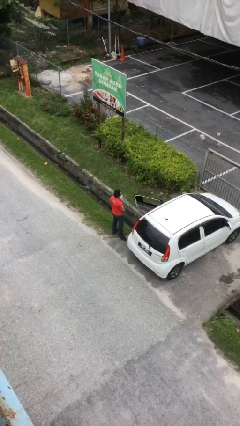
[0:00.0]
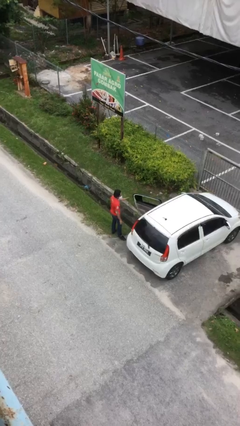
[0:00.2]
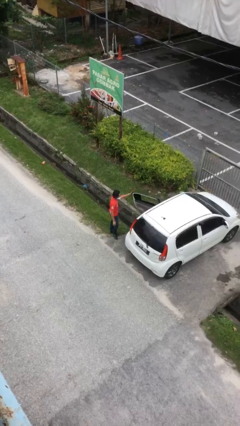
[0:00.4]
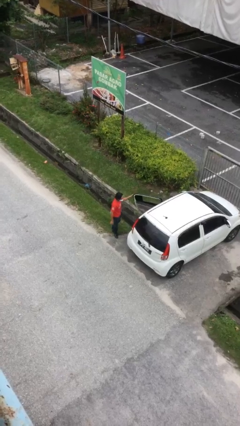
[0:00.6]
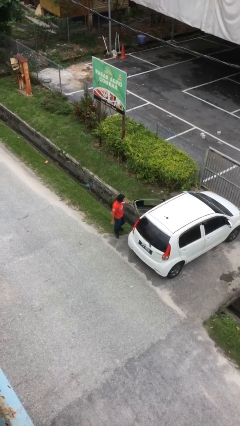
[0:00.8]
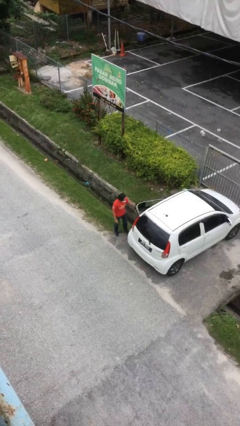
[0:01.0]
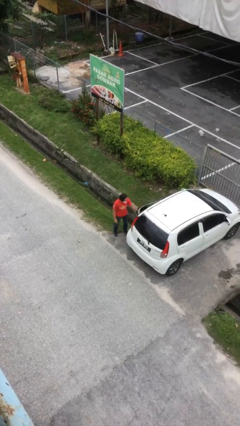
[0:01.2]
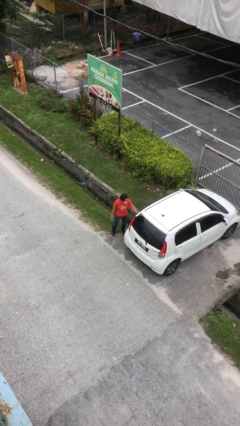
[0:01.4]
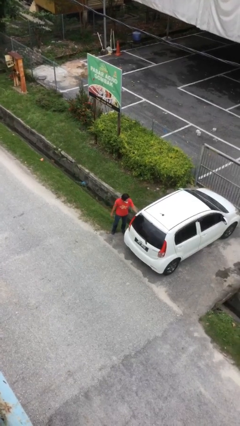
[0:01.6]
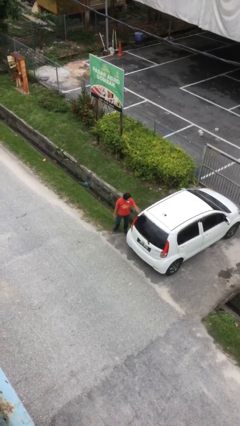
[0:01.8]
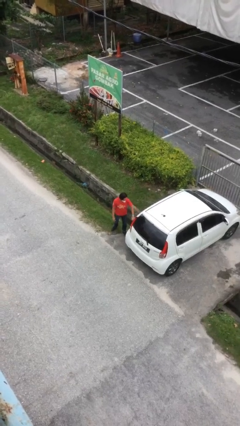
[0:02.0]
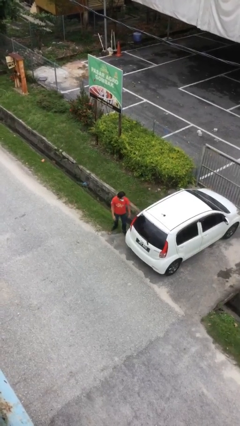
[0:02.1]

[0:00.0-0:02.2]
person closes car door

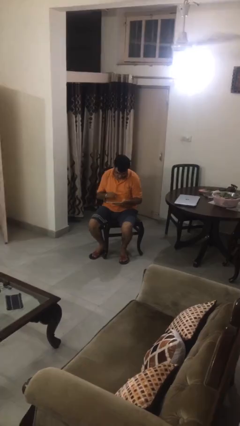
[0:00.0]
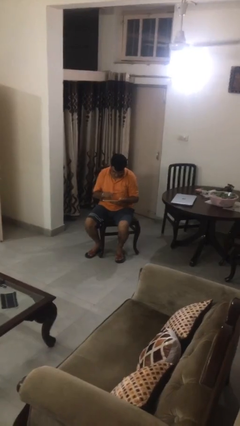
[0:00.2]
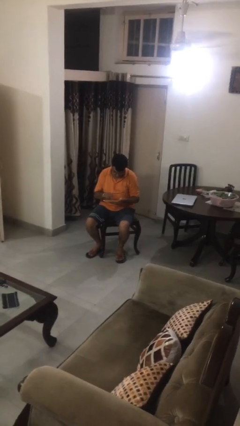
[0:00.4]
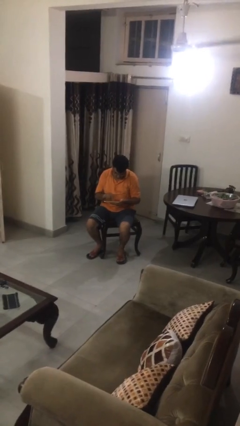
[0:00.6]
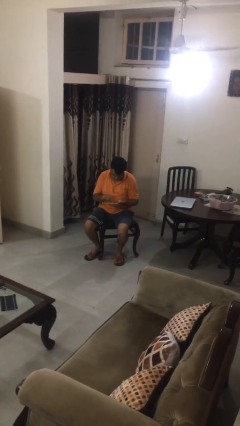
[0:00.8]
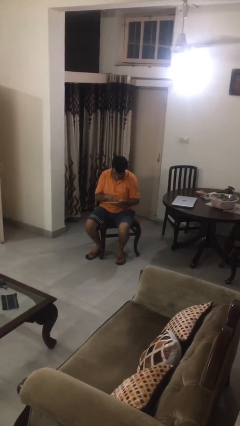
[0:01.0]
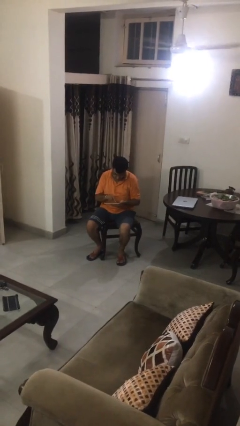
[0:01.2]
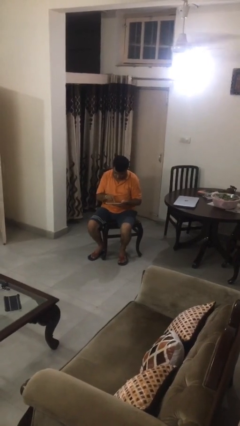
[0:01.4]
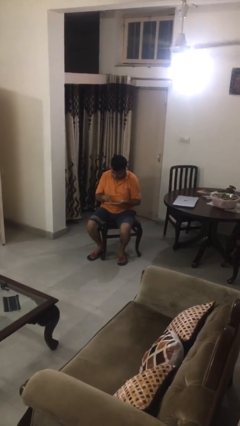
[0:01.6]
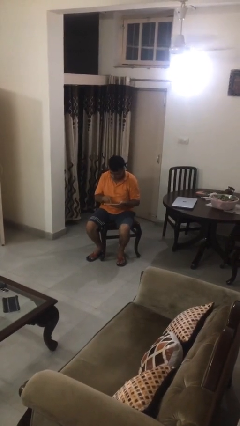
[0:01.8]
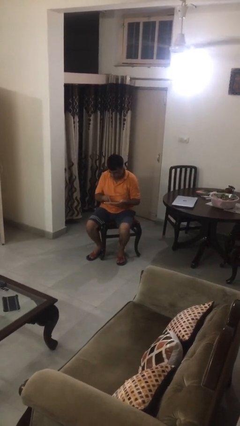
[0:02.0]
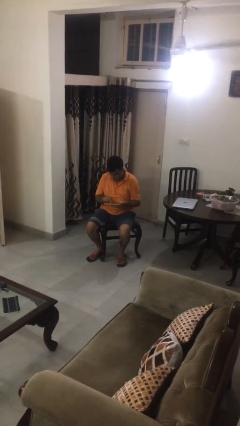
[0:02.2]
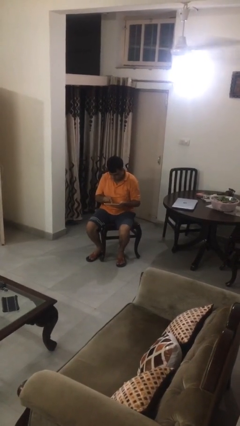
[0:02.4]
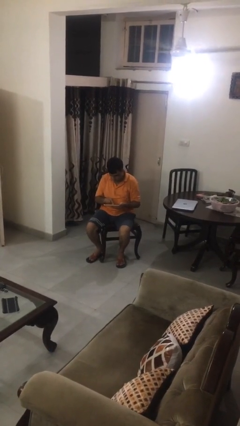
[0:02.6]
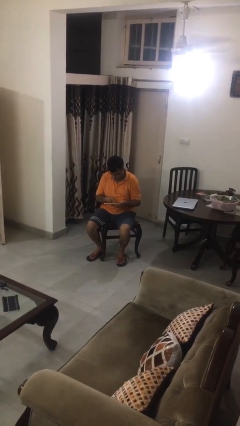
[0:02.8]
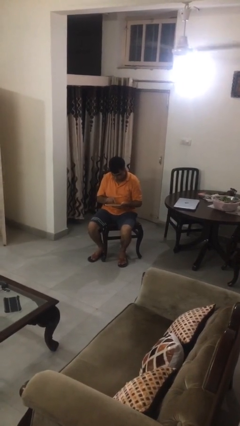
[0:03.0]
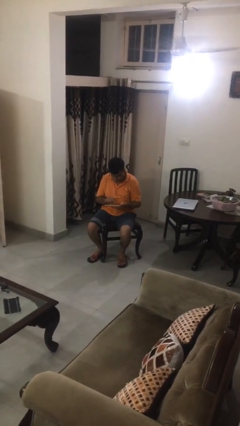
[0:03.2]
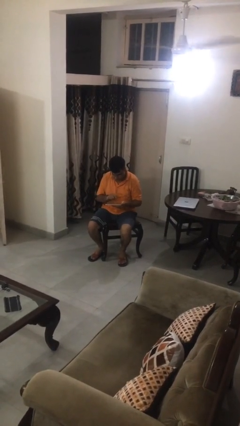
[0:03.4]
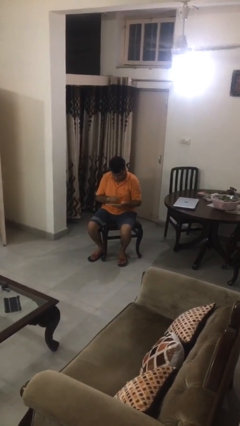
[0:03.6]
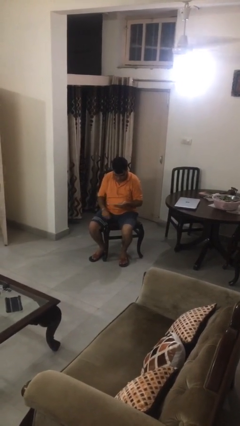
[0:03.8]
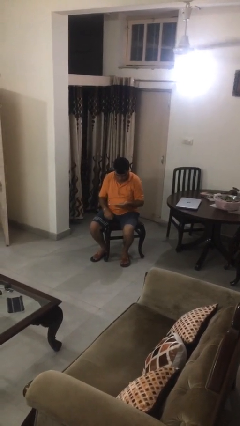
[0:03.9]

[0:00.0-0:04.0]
person interacts with tablet

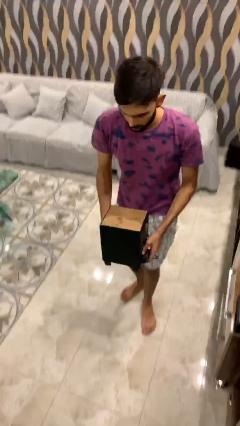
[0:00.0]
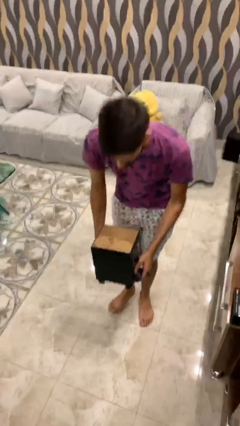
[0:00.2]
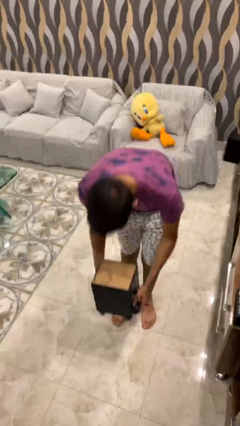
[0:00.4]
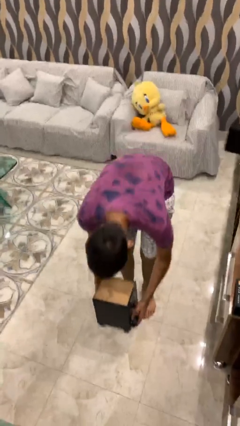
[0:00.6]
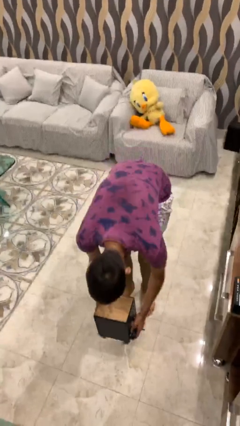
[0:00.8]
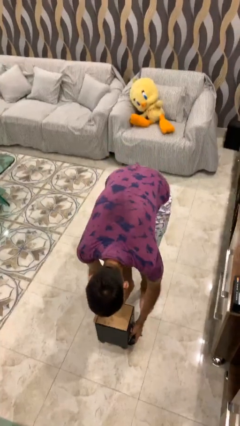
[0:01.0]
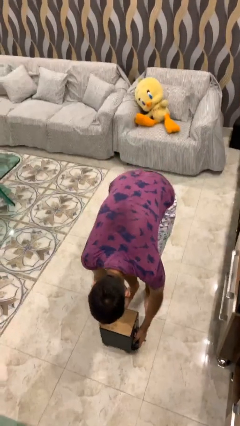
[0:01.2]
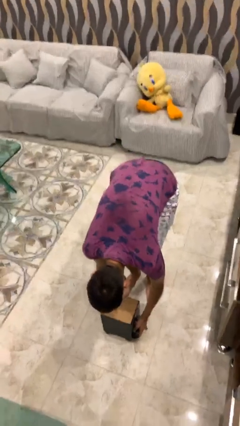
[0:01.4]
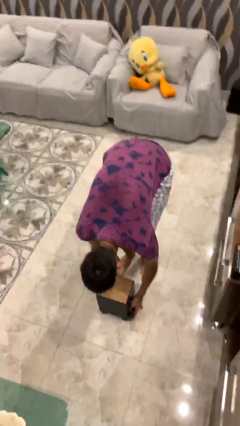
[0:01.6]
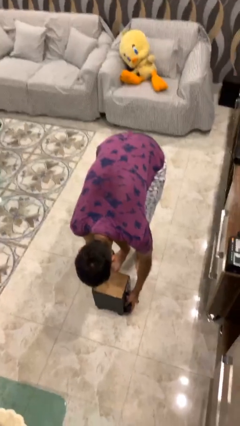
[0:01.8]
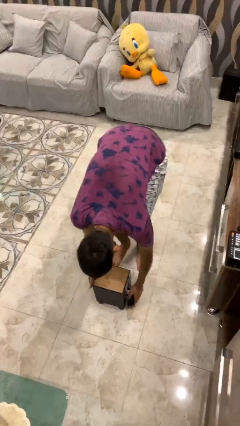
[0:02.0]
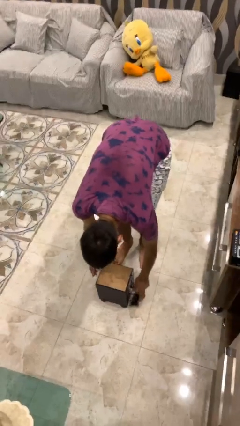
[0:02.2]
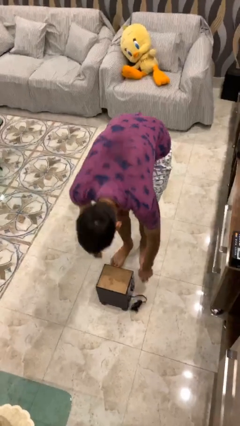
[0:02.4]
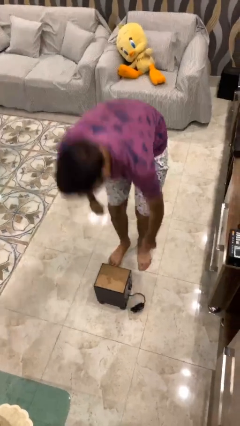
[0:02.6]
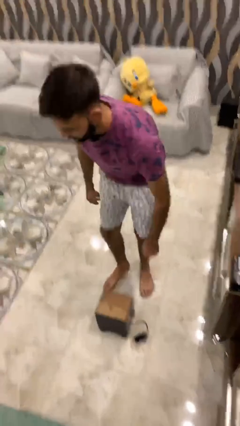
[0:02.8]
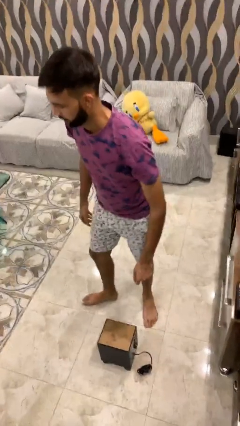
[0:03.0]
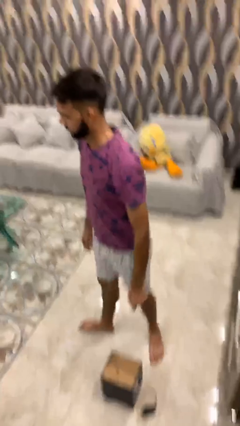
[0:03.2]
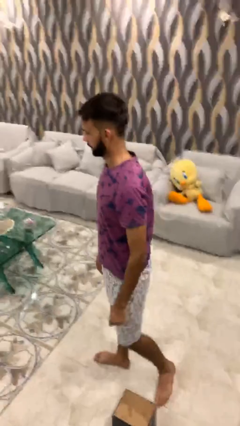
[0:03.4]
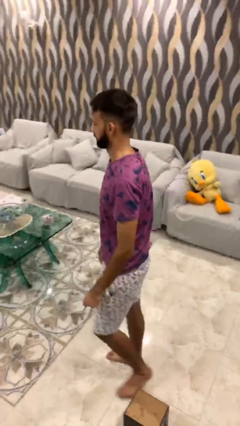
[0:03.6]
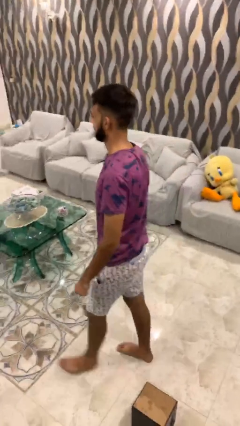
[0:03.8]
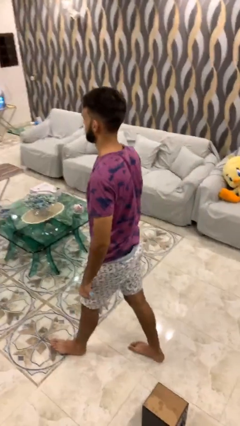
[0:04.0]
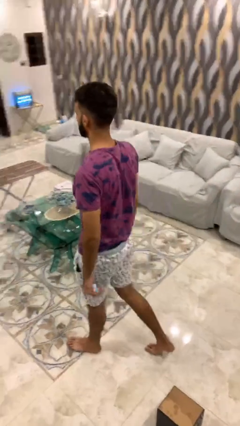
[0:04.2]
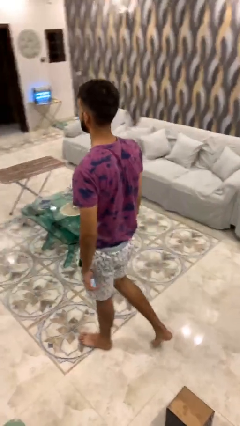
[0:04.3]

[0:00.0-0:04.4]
person puts down object on floor

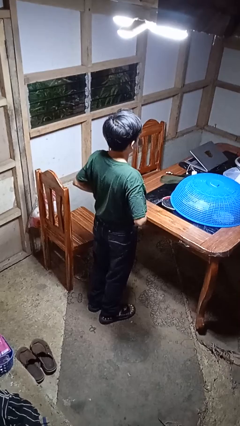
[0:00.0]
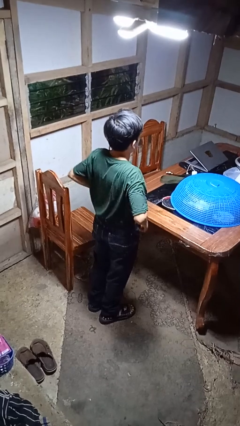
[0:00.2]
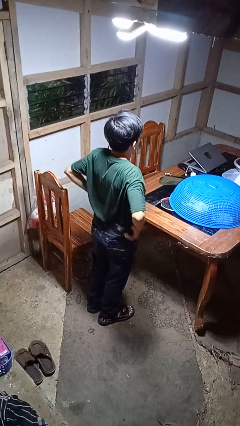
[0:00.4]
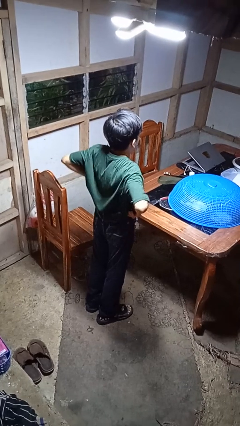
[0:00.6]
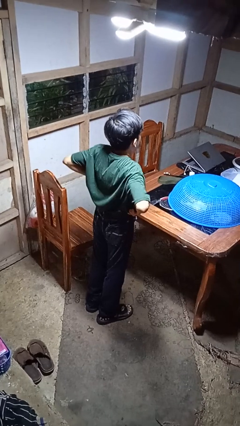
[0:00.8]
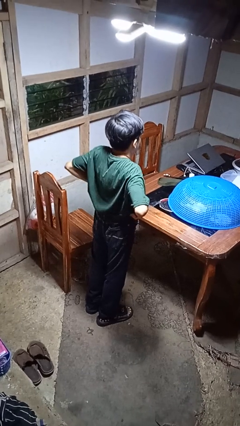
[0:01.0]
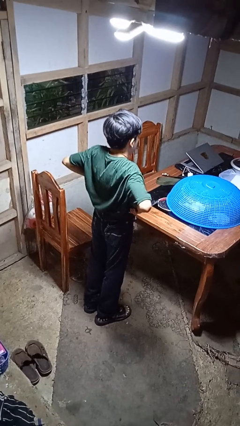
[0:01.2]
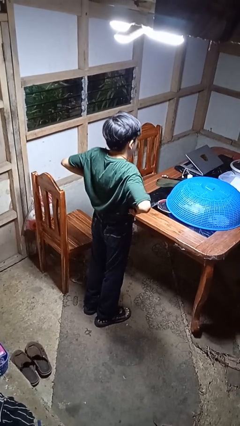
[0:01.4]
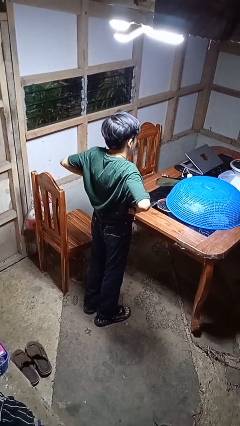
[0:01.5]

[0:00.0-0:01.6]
person hikes up pants

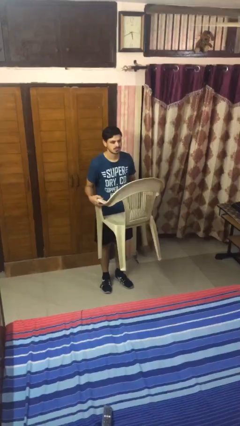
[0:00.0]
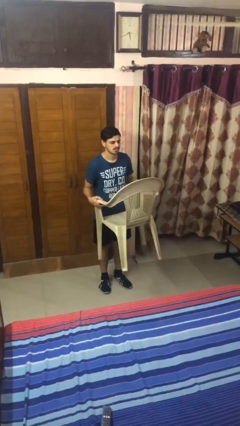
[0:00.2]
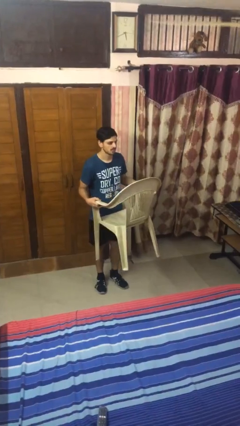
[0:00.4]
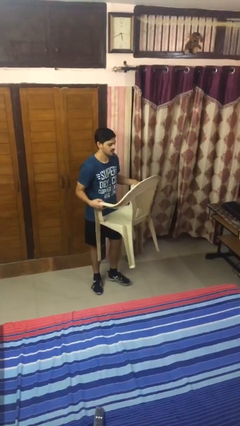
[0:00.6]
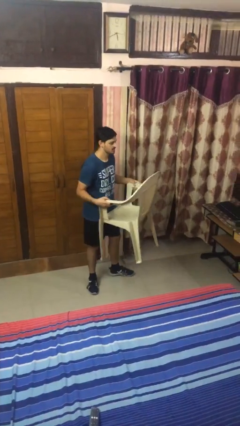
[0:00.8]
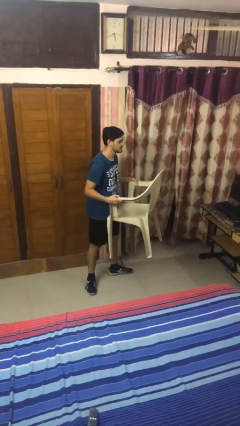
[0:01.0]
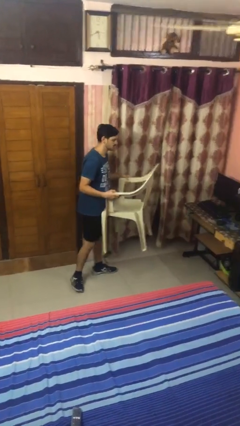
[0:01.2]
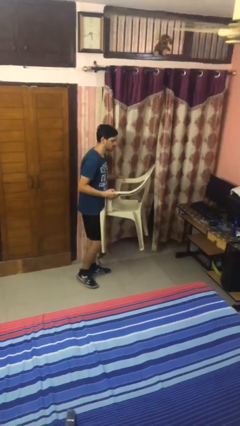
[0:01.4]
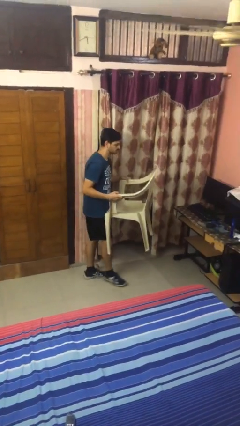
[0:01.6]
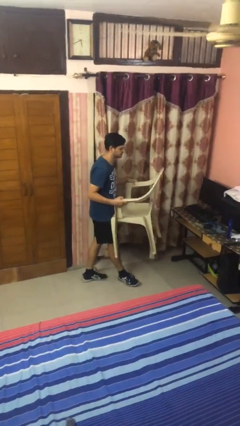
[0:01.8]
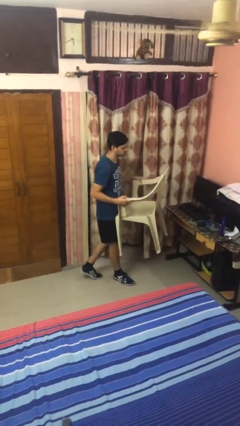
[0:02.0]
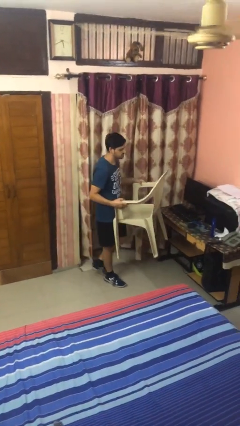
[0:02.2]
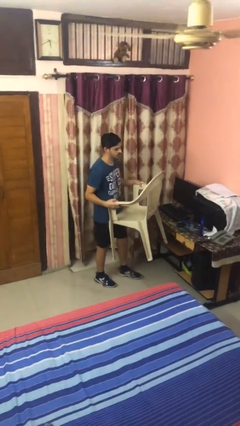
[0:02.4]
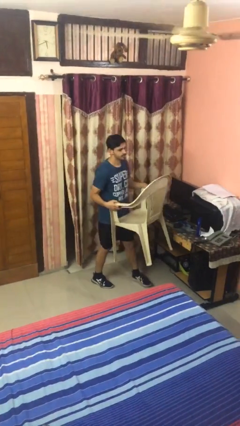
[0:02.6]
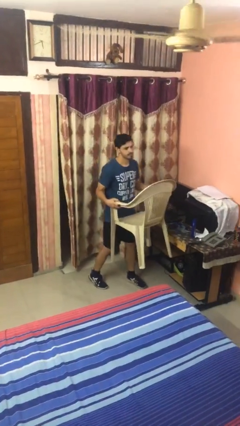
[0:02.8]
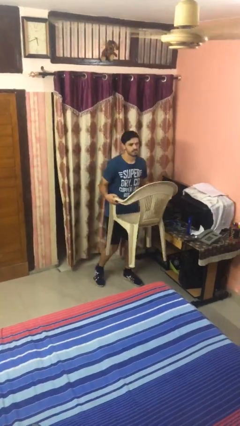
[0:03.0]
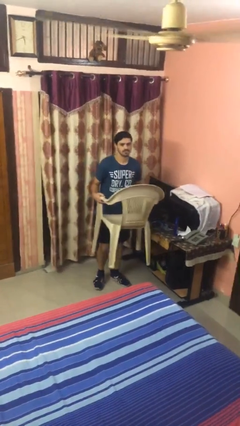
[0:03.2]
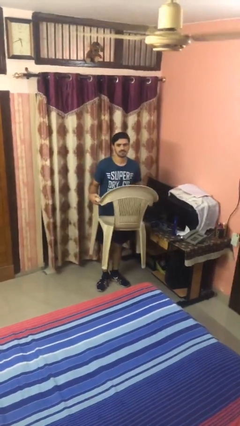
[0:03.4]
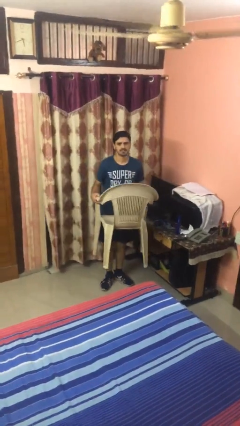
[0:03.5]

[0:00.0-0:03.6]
person carries furniture

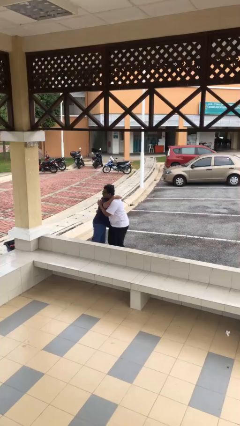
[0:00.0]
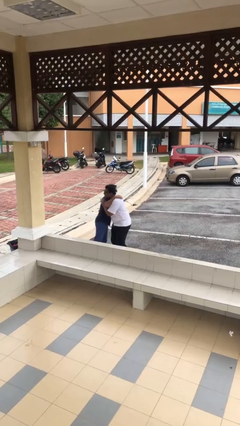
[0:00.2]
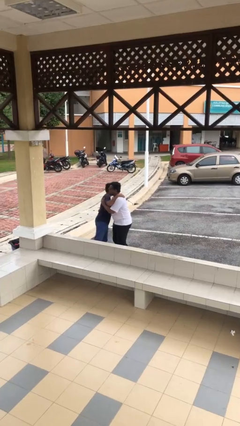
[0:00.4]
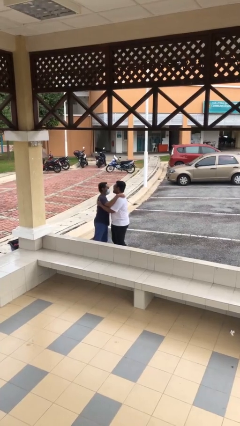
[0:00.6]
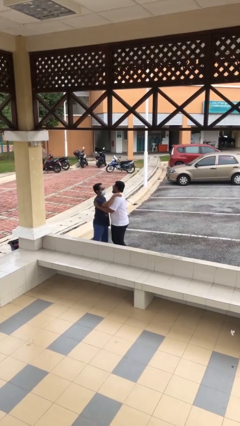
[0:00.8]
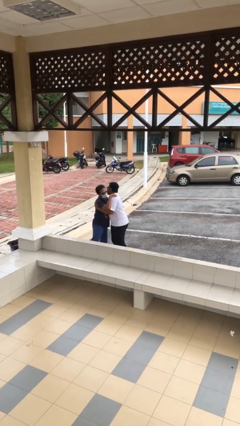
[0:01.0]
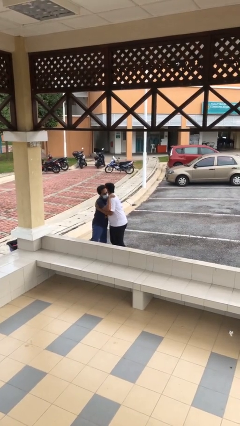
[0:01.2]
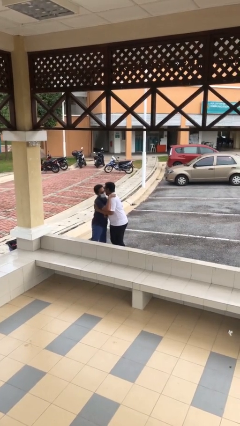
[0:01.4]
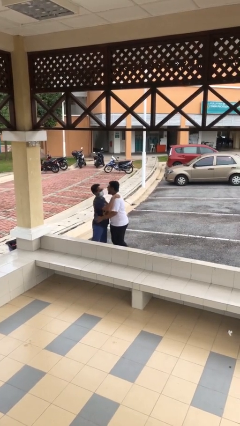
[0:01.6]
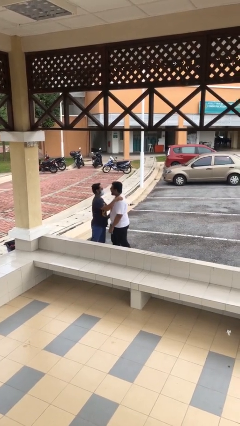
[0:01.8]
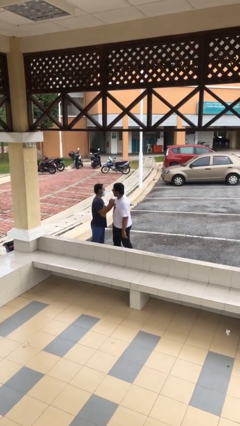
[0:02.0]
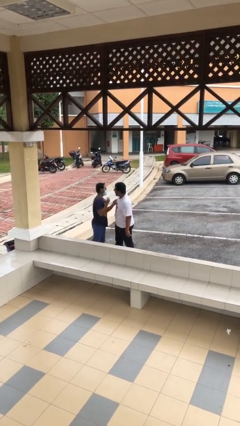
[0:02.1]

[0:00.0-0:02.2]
person embraces person
